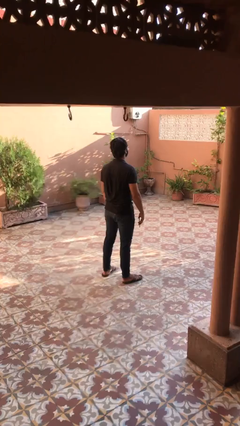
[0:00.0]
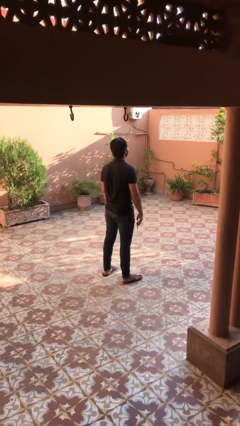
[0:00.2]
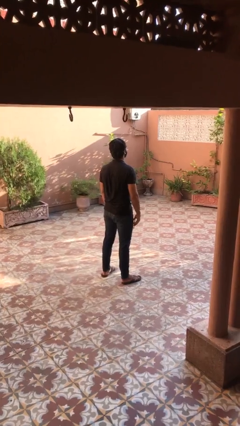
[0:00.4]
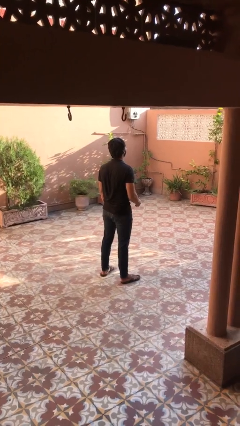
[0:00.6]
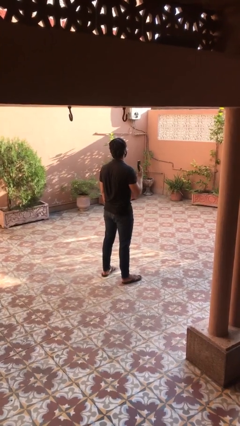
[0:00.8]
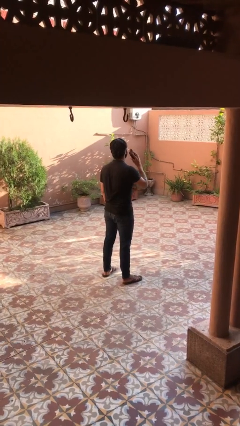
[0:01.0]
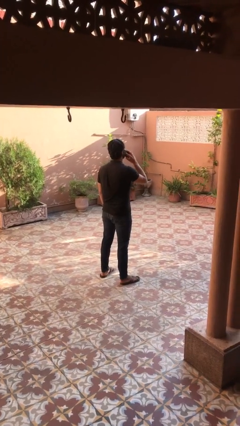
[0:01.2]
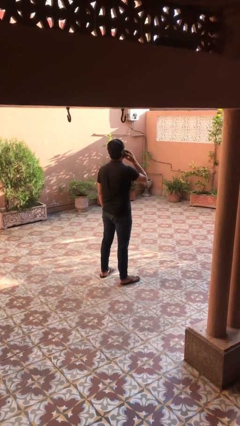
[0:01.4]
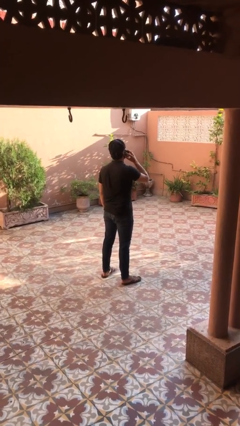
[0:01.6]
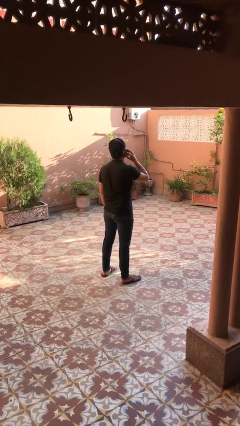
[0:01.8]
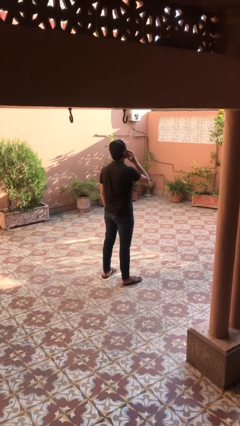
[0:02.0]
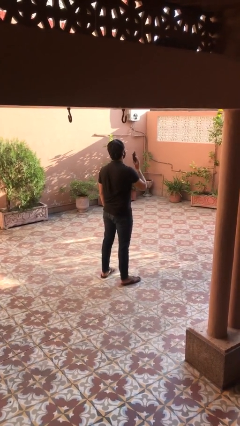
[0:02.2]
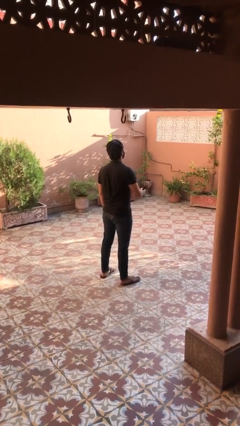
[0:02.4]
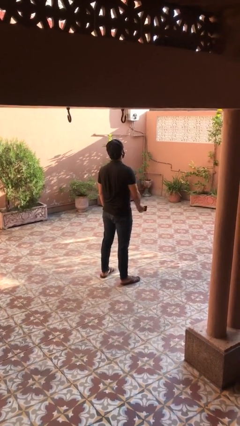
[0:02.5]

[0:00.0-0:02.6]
person gestures call me

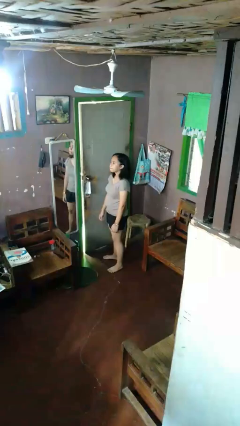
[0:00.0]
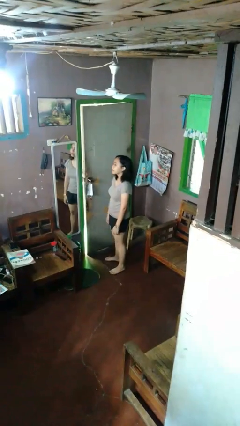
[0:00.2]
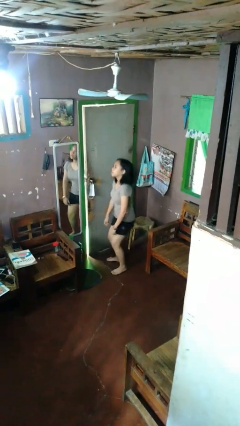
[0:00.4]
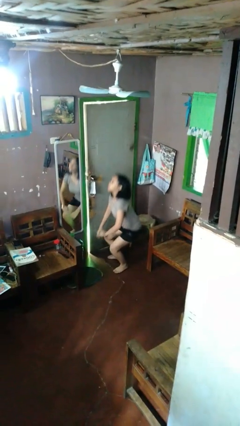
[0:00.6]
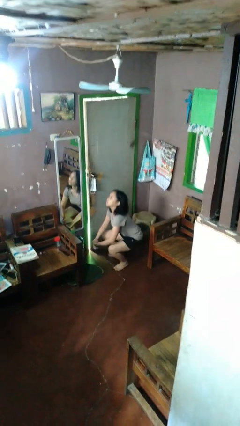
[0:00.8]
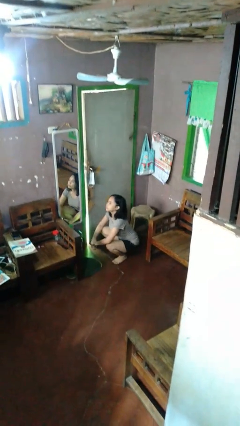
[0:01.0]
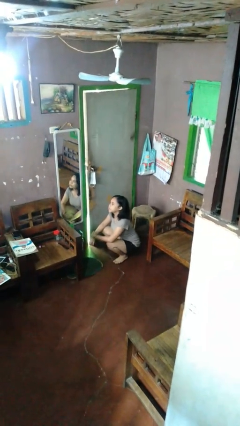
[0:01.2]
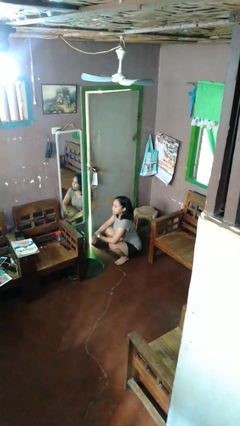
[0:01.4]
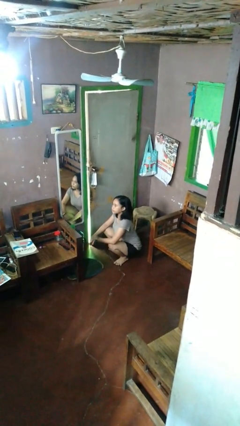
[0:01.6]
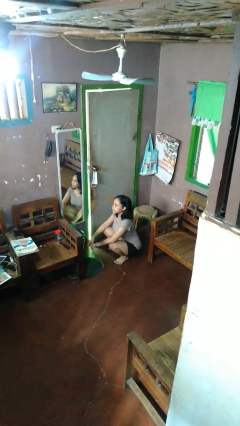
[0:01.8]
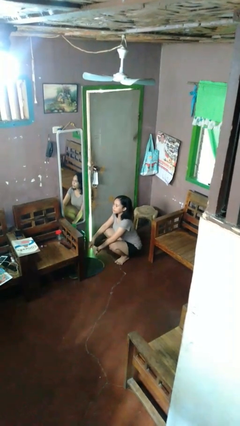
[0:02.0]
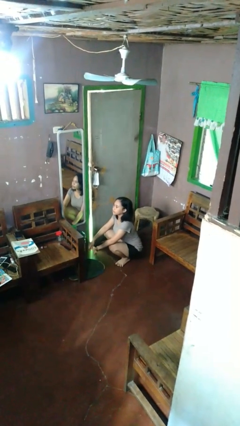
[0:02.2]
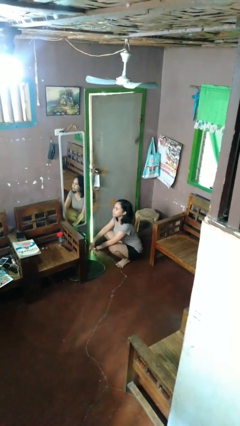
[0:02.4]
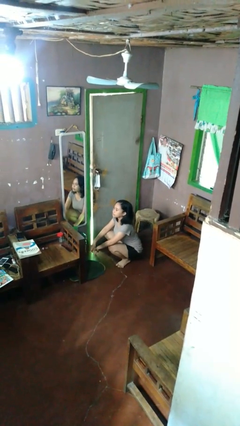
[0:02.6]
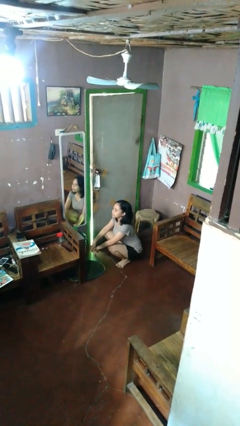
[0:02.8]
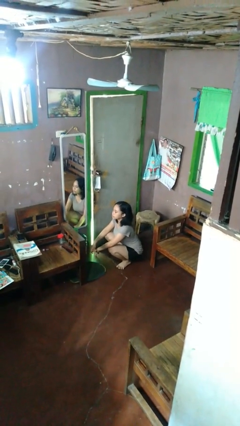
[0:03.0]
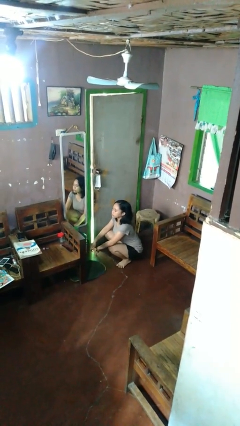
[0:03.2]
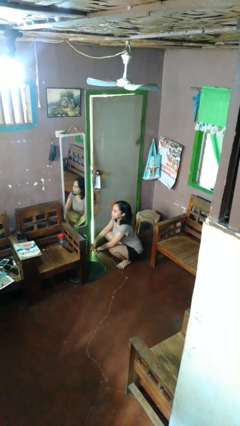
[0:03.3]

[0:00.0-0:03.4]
person squats

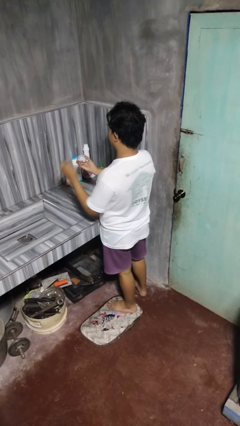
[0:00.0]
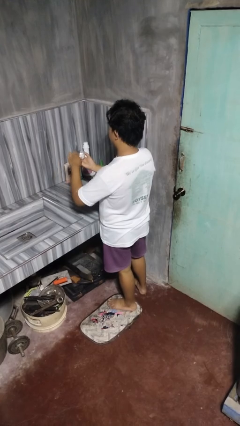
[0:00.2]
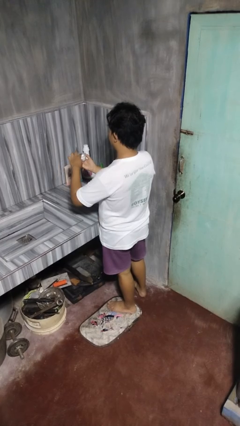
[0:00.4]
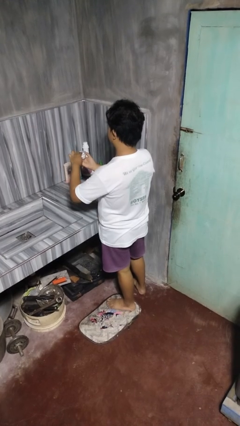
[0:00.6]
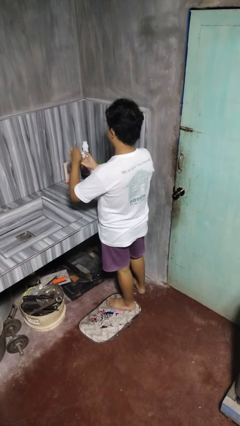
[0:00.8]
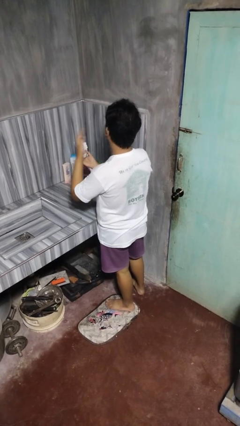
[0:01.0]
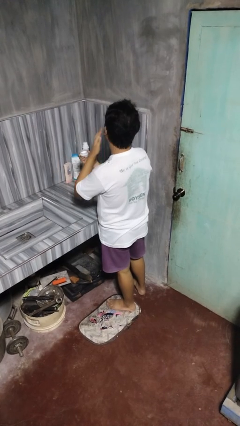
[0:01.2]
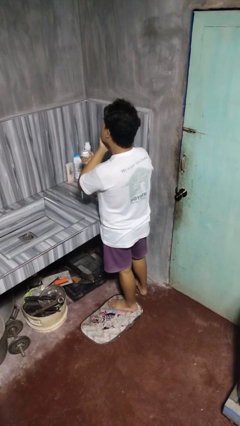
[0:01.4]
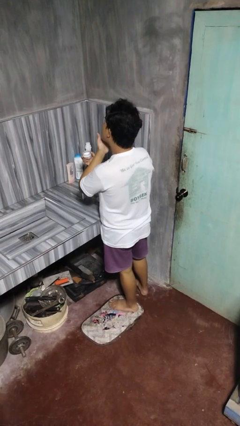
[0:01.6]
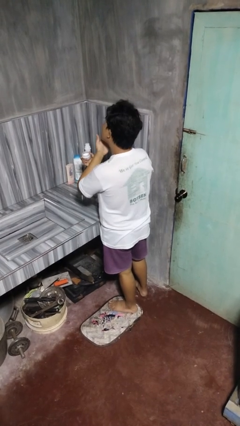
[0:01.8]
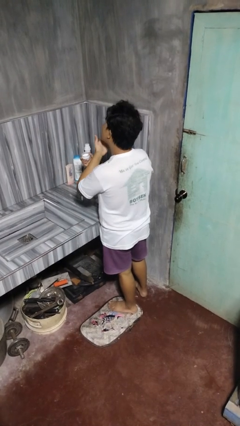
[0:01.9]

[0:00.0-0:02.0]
person applies facial moisturizer

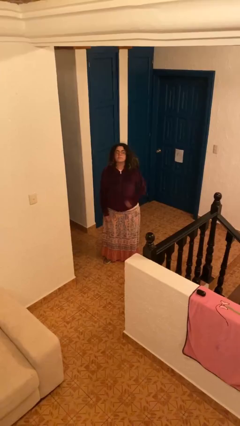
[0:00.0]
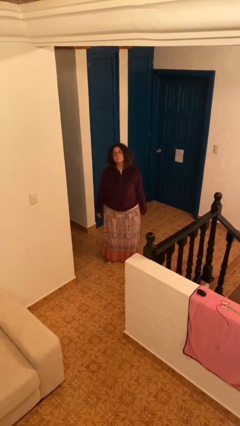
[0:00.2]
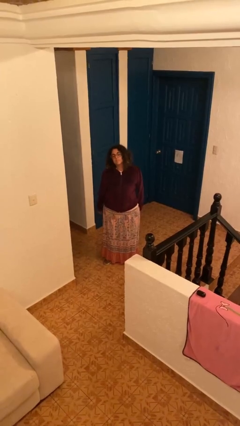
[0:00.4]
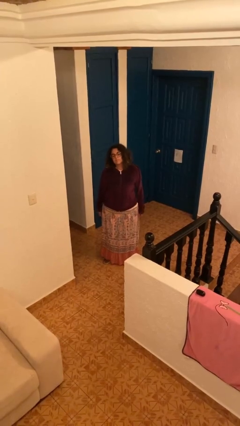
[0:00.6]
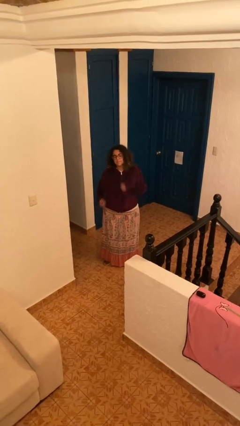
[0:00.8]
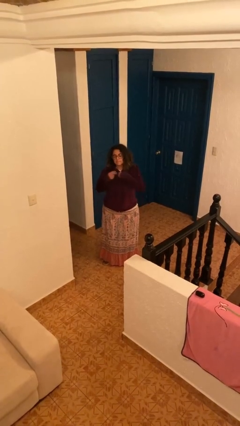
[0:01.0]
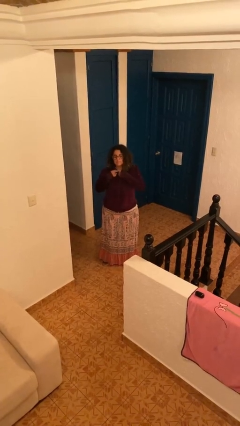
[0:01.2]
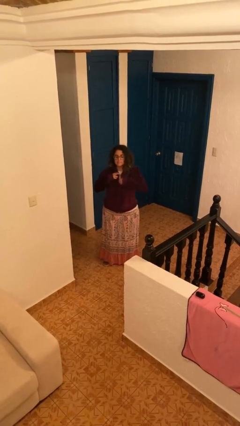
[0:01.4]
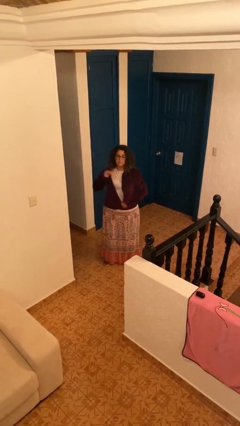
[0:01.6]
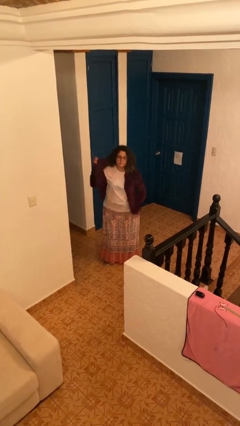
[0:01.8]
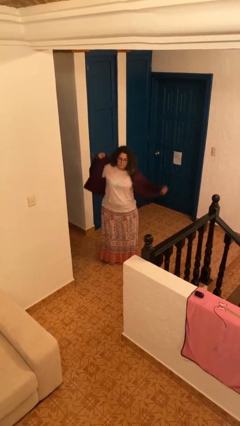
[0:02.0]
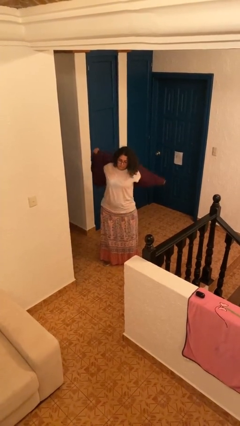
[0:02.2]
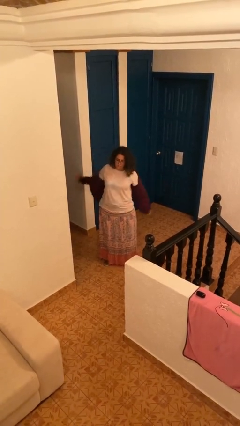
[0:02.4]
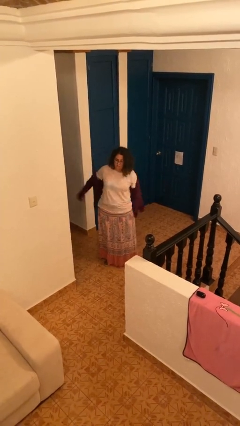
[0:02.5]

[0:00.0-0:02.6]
person unzips jacket

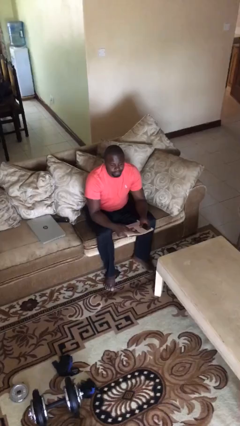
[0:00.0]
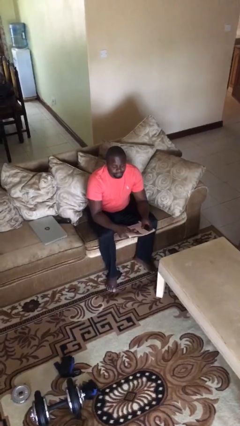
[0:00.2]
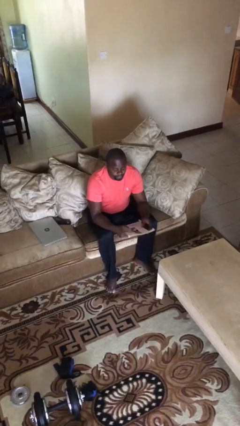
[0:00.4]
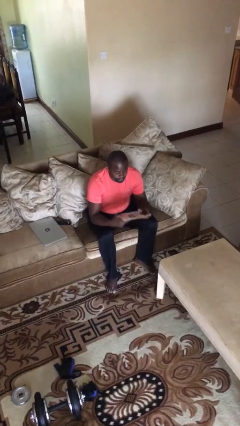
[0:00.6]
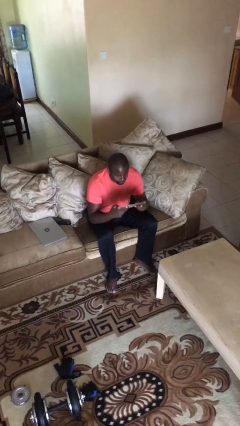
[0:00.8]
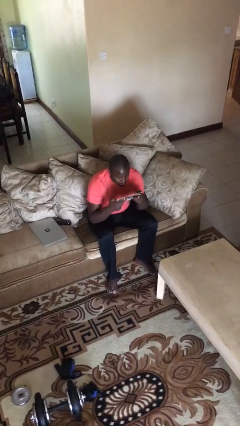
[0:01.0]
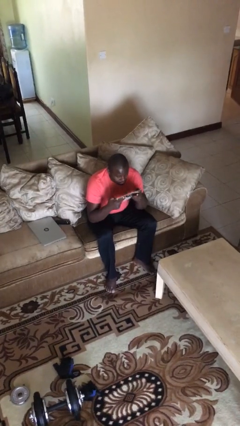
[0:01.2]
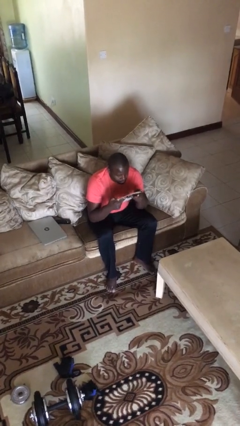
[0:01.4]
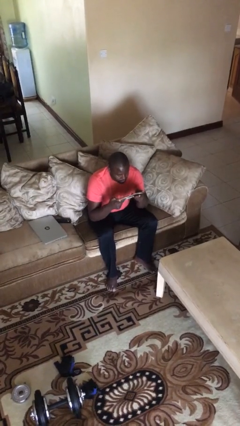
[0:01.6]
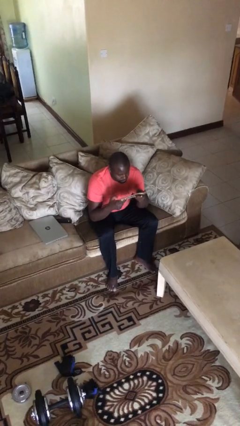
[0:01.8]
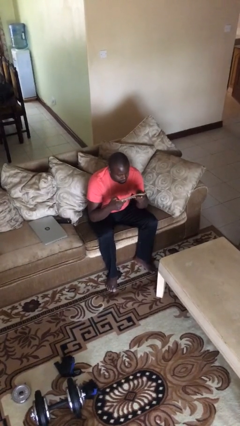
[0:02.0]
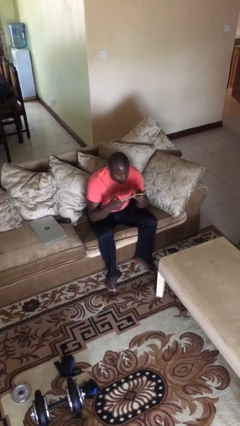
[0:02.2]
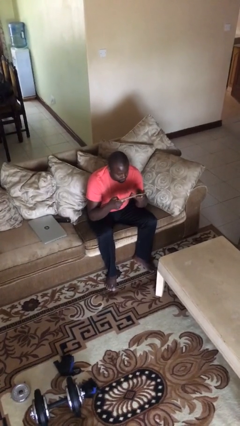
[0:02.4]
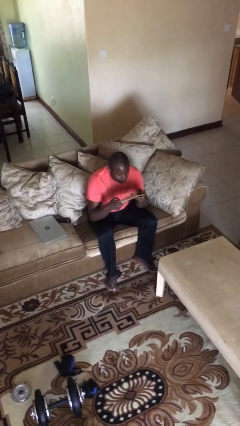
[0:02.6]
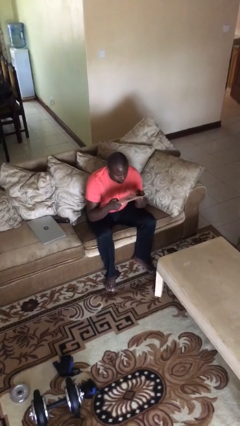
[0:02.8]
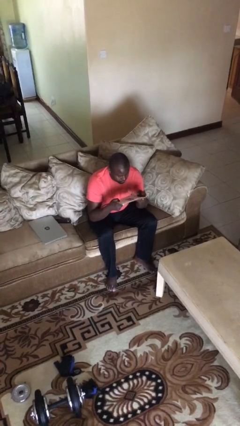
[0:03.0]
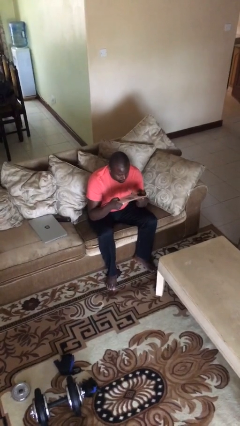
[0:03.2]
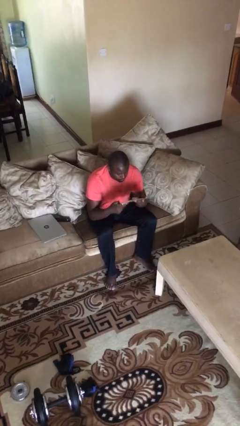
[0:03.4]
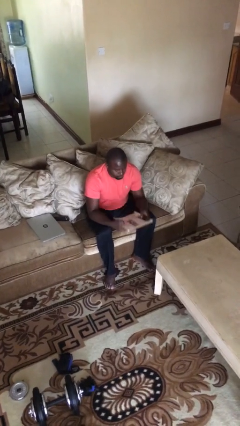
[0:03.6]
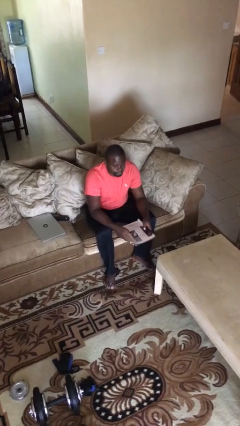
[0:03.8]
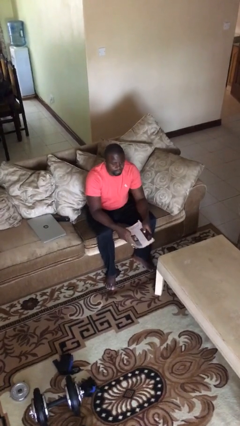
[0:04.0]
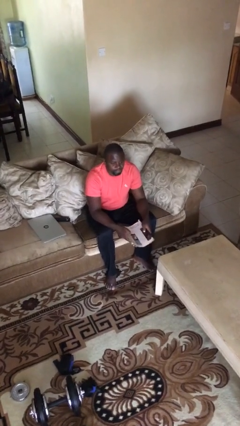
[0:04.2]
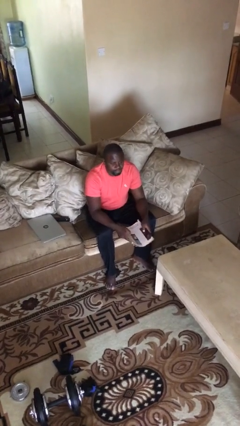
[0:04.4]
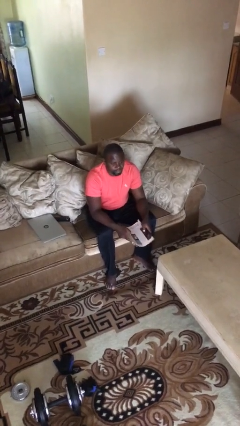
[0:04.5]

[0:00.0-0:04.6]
person reads document

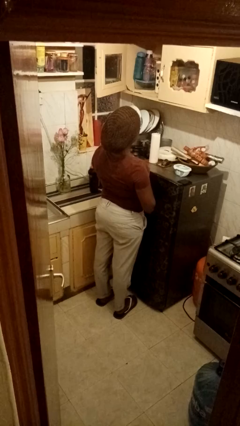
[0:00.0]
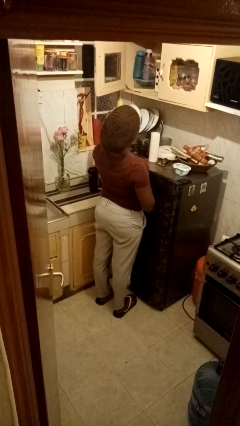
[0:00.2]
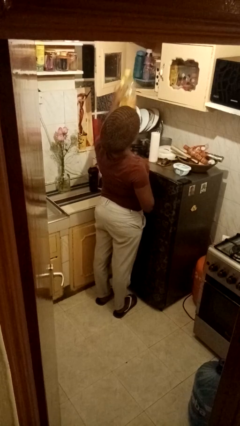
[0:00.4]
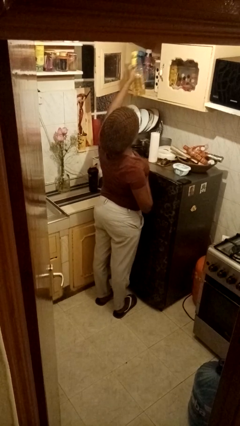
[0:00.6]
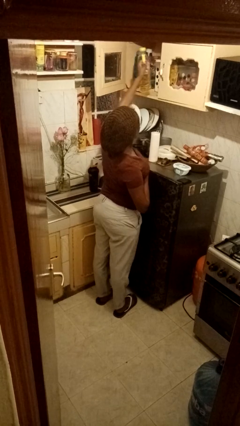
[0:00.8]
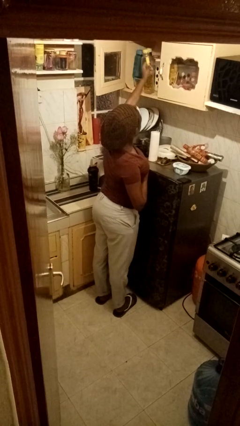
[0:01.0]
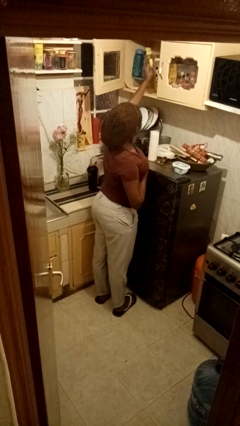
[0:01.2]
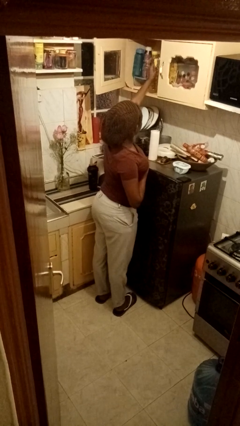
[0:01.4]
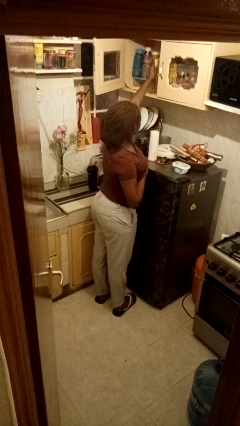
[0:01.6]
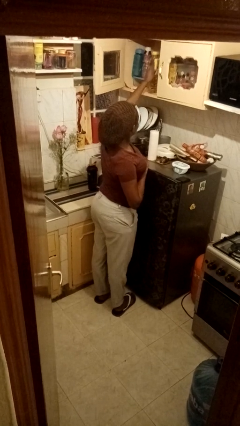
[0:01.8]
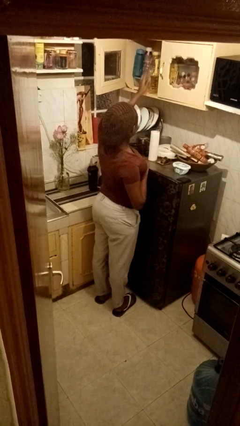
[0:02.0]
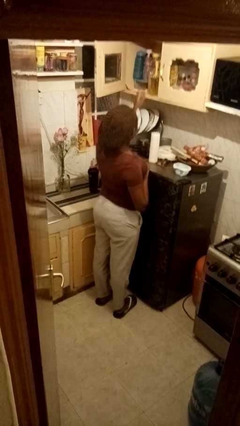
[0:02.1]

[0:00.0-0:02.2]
person puts down object on shelf
